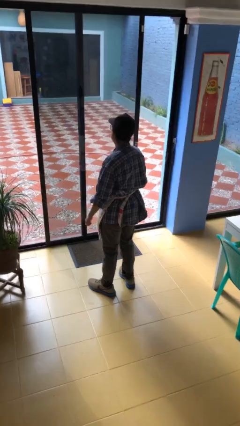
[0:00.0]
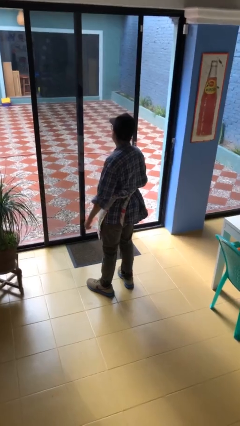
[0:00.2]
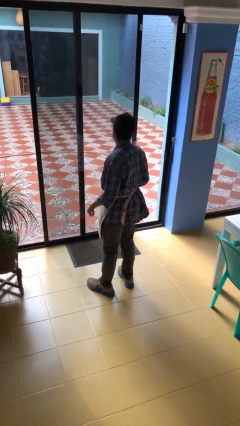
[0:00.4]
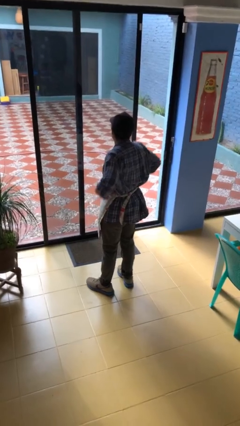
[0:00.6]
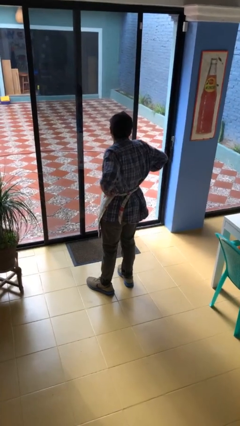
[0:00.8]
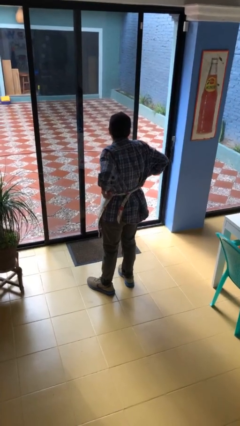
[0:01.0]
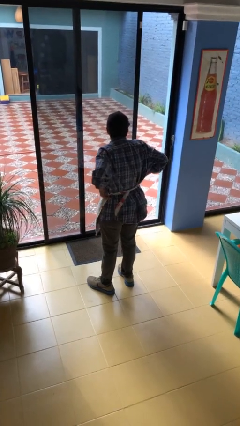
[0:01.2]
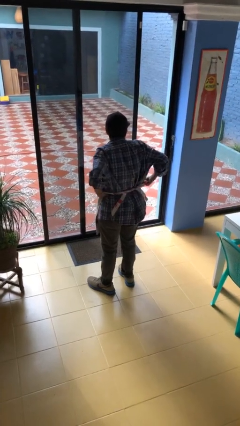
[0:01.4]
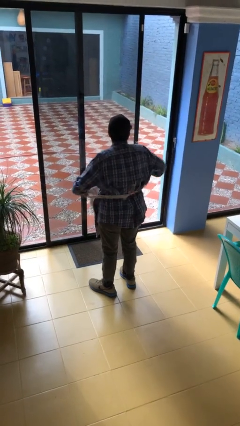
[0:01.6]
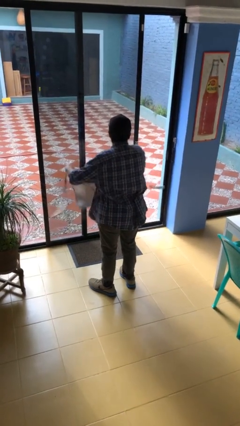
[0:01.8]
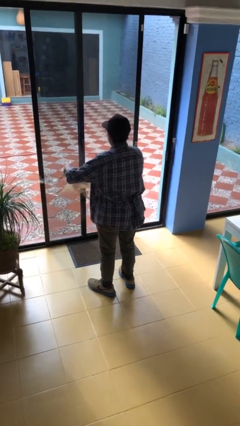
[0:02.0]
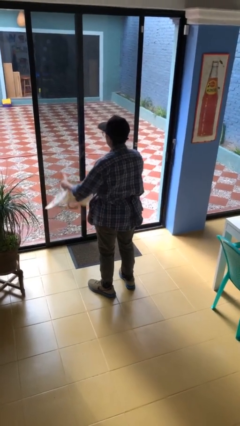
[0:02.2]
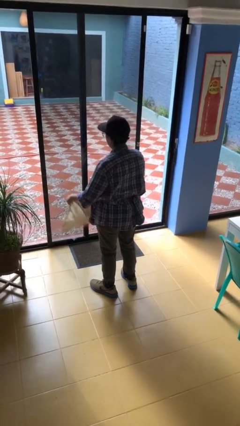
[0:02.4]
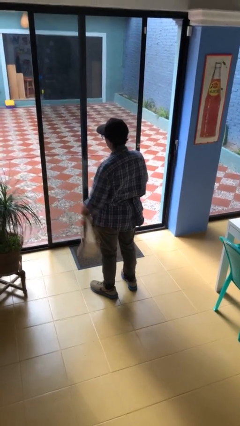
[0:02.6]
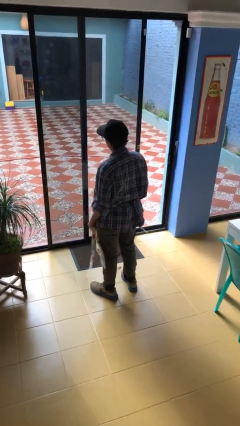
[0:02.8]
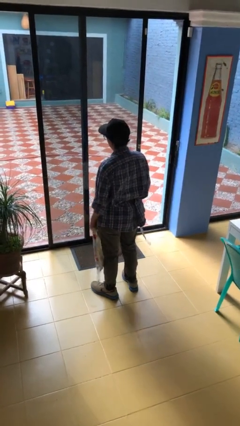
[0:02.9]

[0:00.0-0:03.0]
person takes off apron

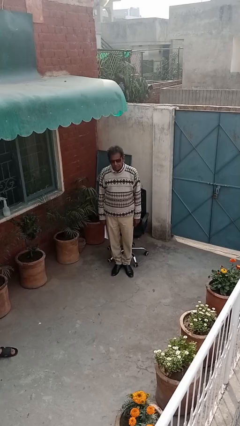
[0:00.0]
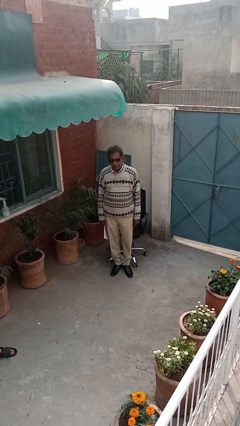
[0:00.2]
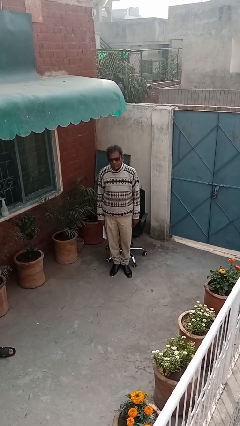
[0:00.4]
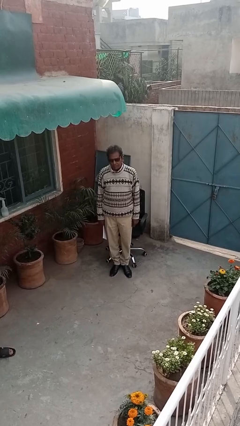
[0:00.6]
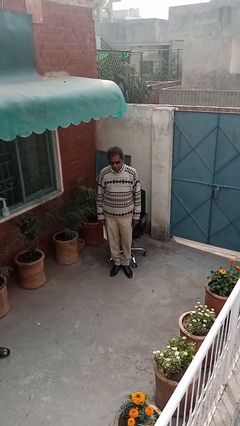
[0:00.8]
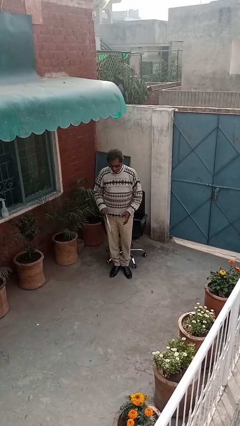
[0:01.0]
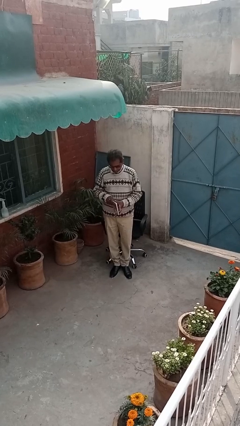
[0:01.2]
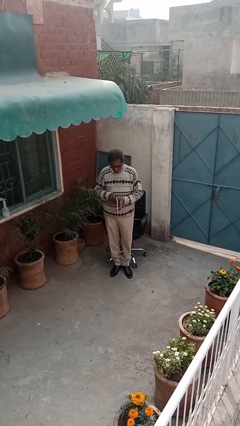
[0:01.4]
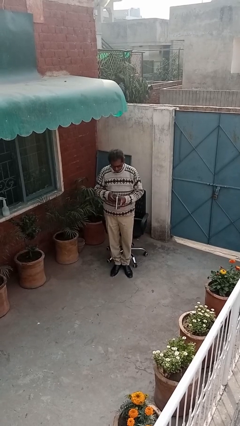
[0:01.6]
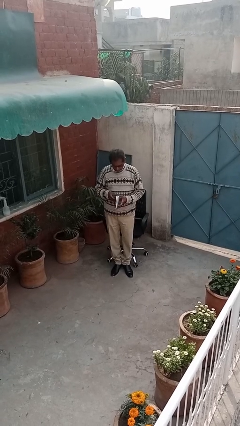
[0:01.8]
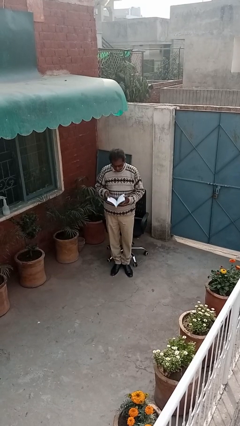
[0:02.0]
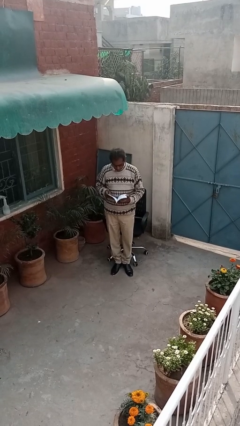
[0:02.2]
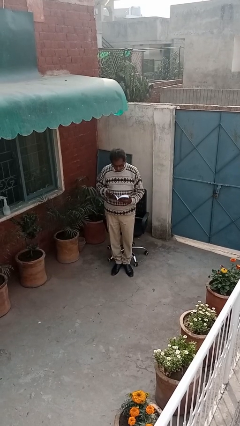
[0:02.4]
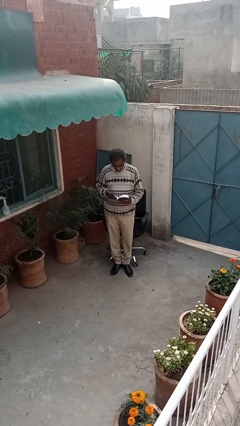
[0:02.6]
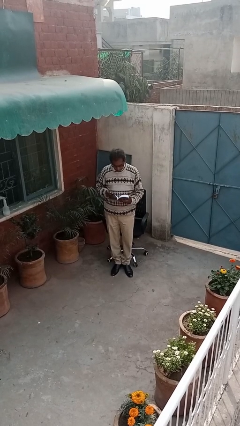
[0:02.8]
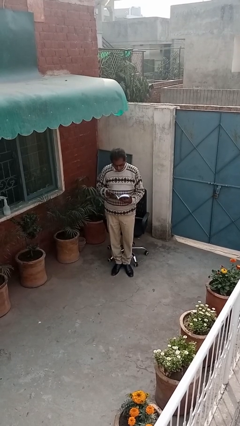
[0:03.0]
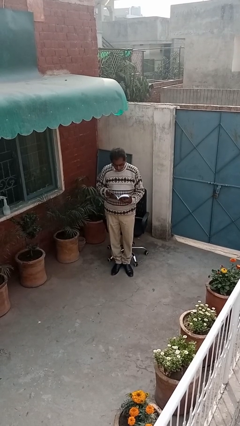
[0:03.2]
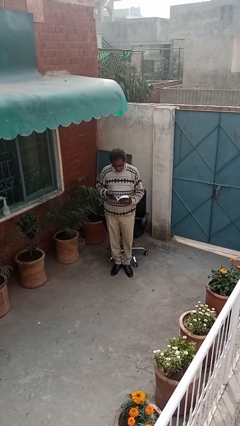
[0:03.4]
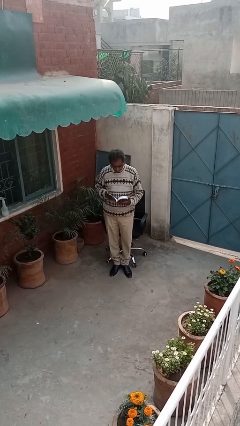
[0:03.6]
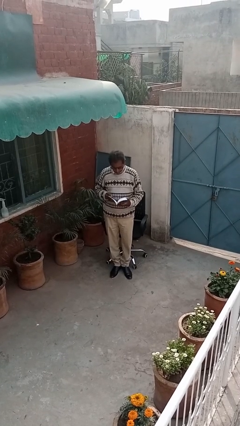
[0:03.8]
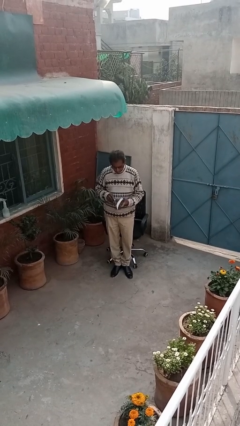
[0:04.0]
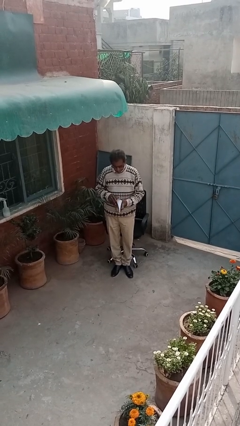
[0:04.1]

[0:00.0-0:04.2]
person reads document

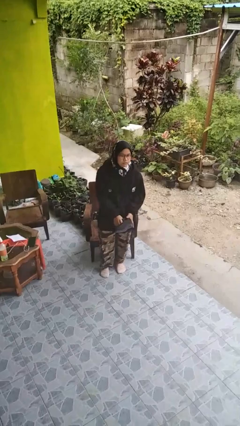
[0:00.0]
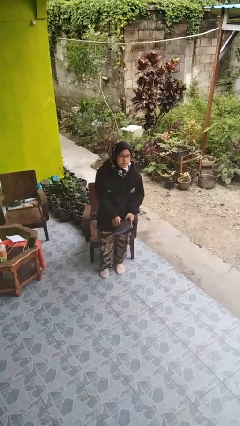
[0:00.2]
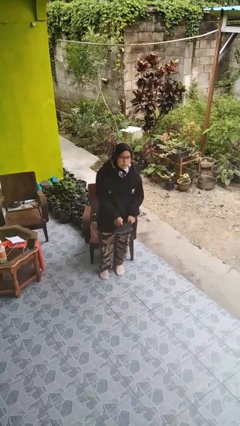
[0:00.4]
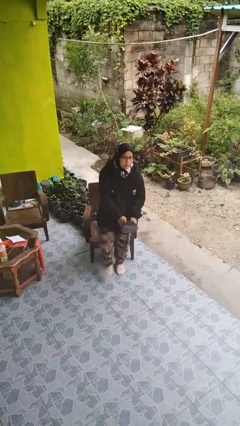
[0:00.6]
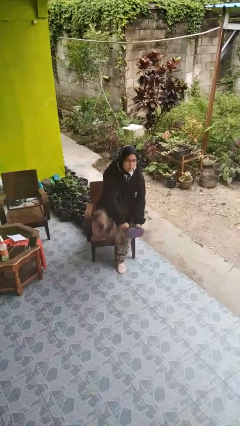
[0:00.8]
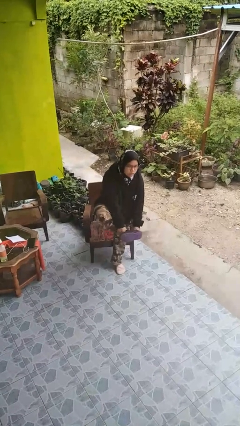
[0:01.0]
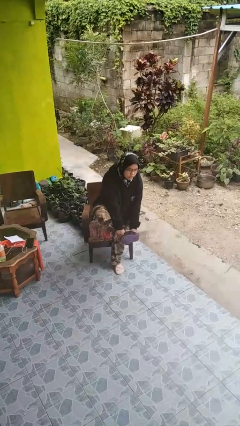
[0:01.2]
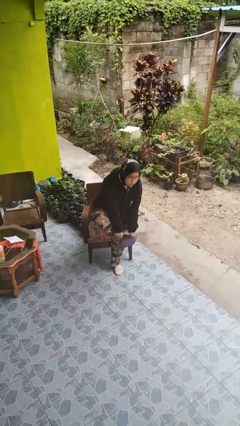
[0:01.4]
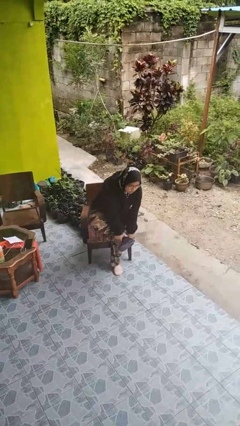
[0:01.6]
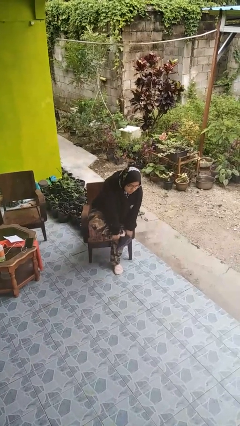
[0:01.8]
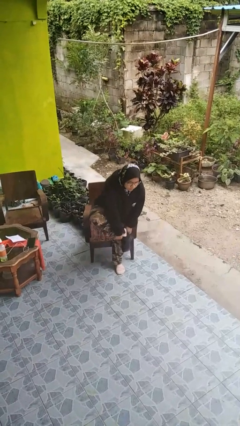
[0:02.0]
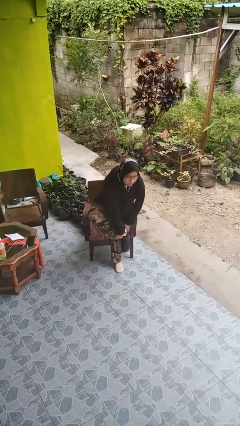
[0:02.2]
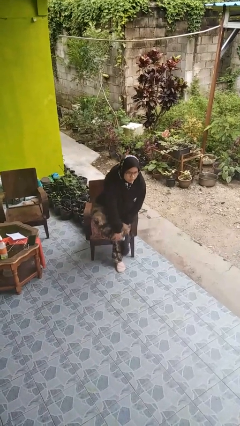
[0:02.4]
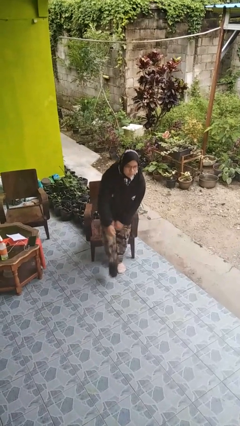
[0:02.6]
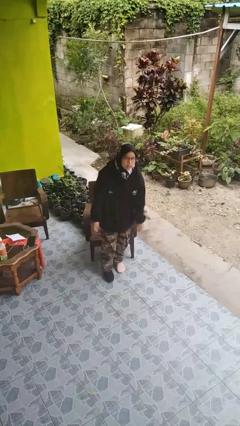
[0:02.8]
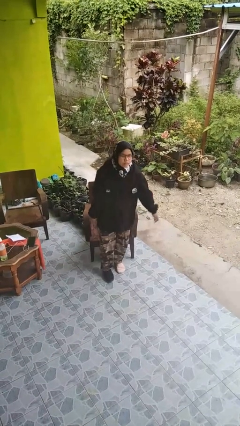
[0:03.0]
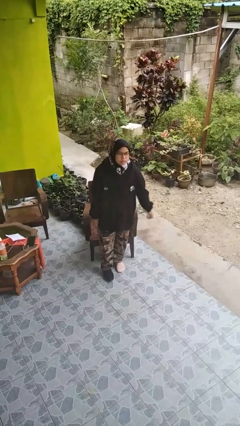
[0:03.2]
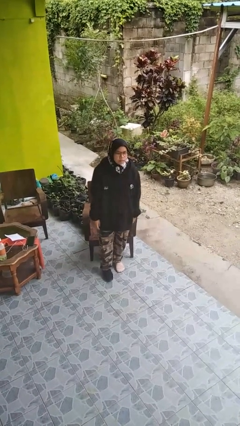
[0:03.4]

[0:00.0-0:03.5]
person puts on shoes

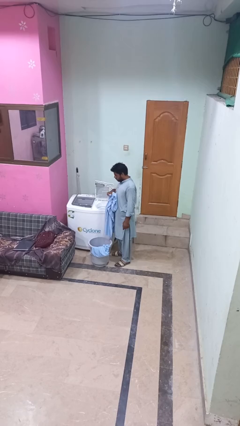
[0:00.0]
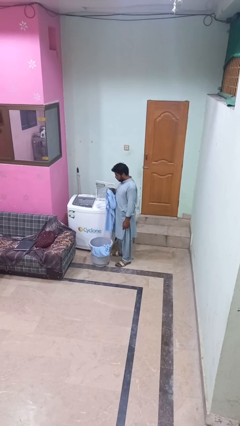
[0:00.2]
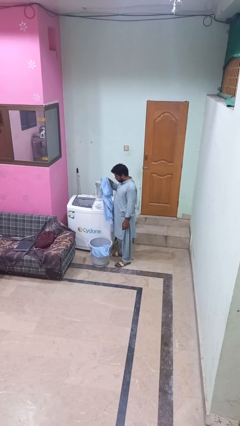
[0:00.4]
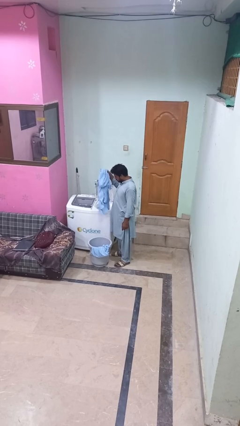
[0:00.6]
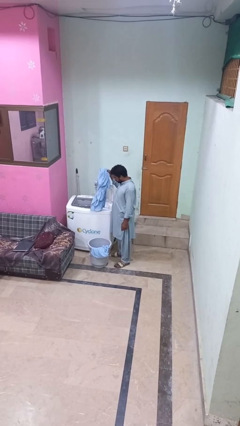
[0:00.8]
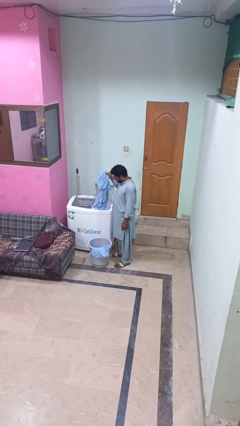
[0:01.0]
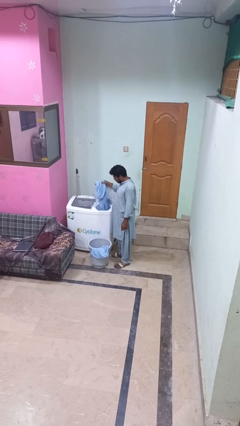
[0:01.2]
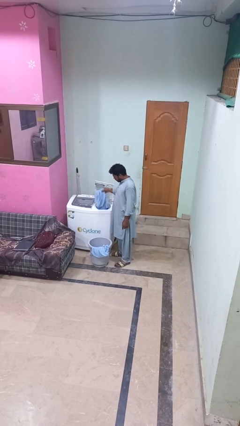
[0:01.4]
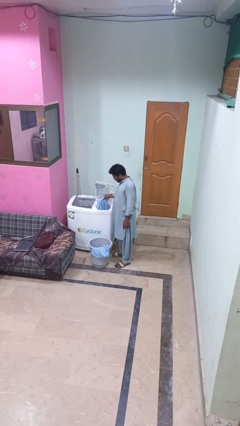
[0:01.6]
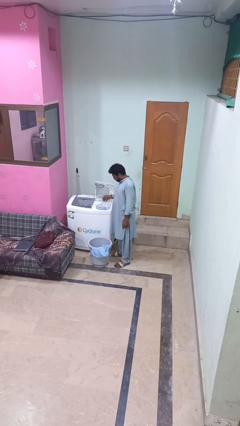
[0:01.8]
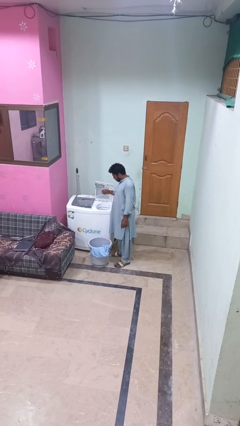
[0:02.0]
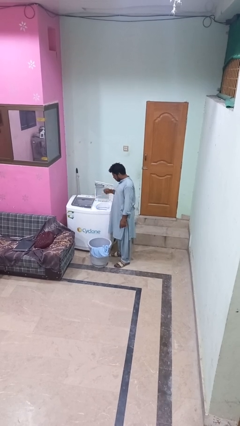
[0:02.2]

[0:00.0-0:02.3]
person loads dryer

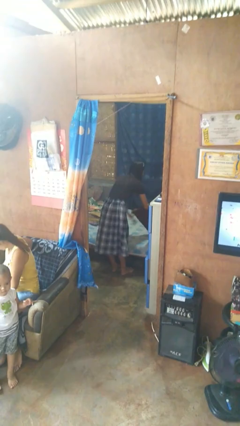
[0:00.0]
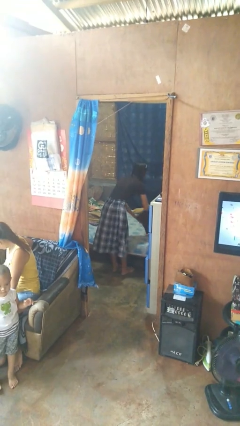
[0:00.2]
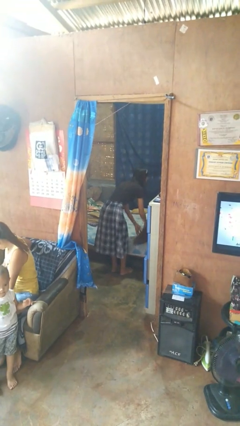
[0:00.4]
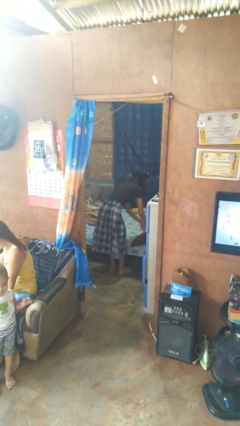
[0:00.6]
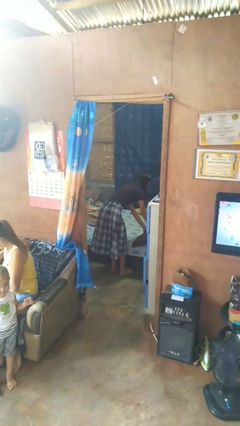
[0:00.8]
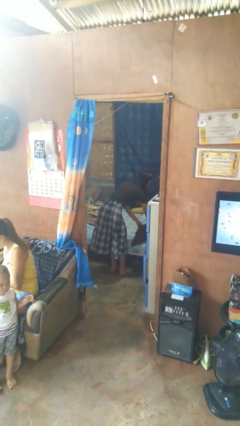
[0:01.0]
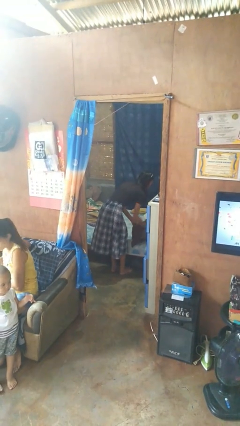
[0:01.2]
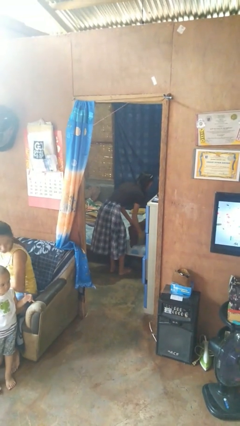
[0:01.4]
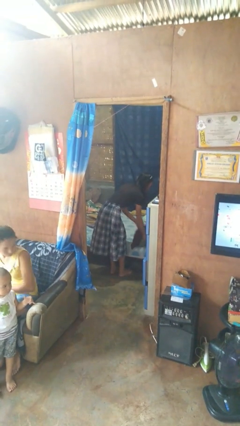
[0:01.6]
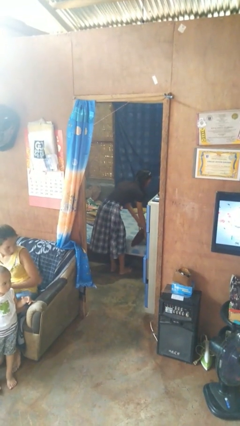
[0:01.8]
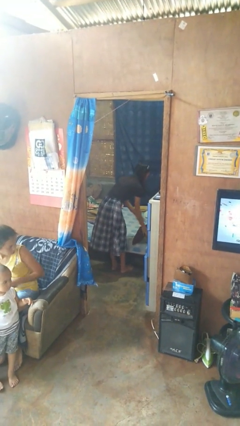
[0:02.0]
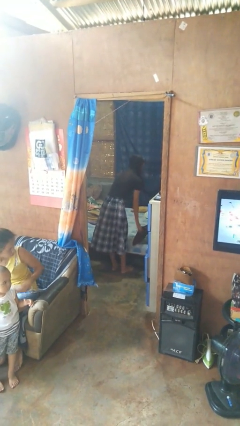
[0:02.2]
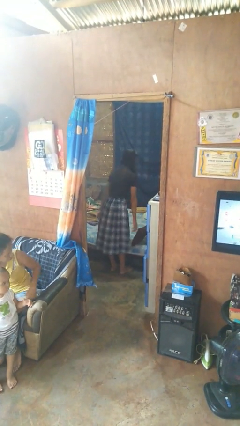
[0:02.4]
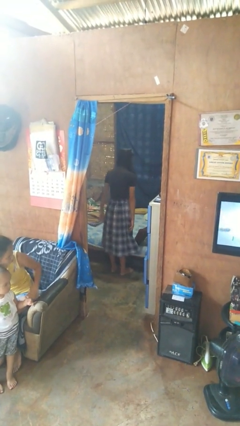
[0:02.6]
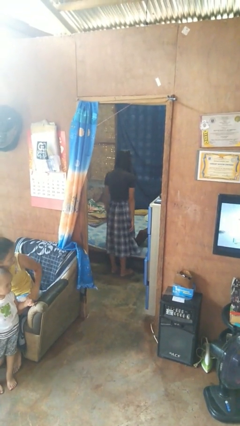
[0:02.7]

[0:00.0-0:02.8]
person makes bed

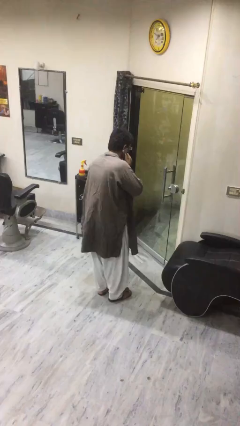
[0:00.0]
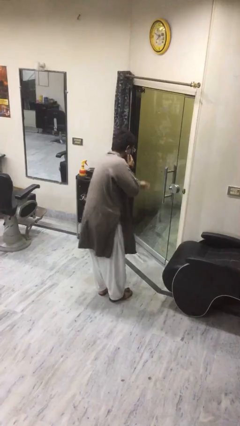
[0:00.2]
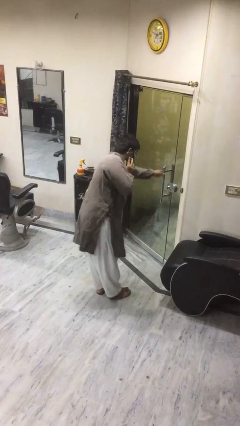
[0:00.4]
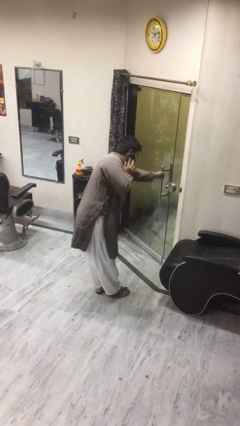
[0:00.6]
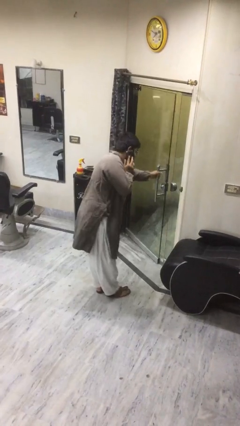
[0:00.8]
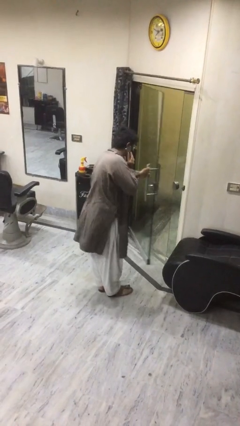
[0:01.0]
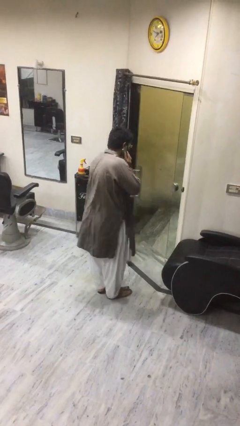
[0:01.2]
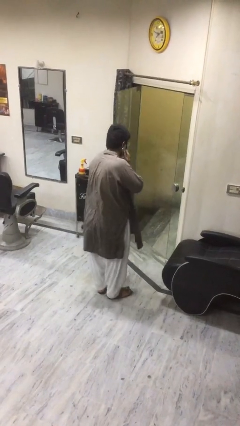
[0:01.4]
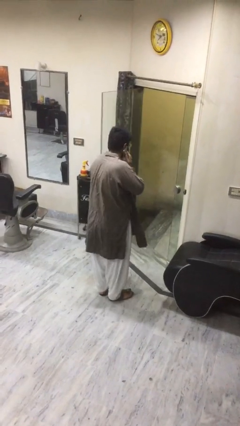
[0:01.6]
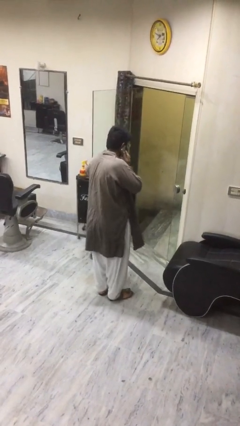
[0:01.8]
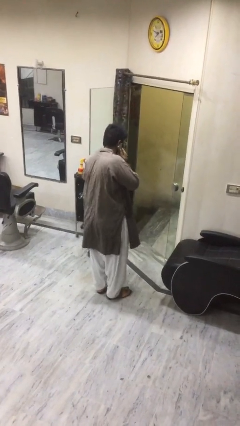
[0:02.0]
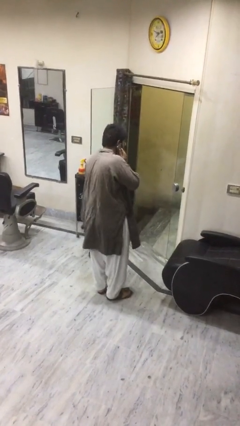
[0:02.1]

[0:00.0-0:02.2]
person opens facility door
